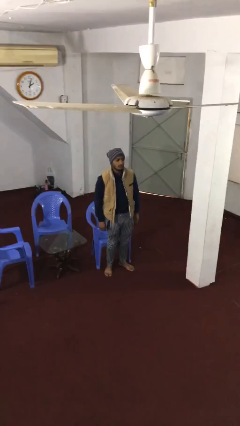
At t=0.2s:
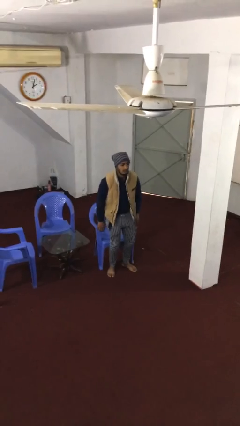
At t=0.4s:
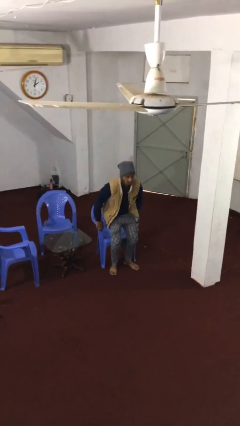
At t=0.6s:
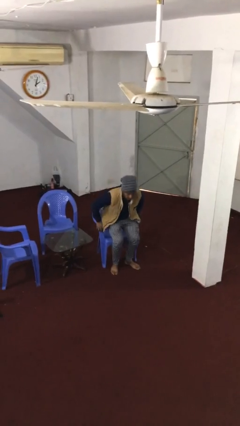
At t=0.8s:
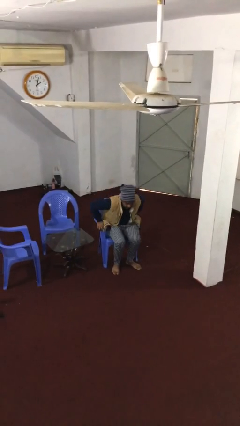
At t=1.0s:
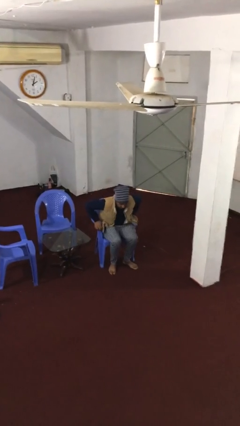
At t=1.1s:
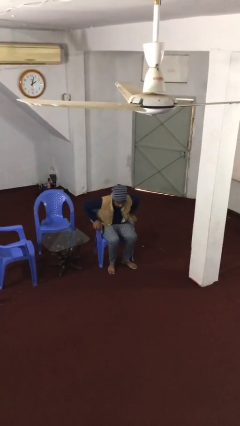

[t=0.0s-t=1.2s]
person sits down

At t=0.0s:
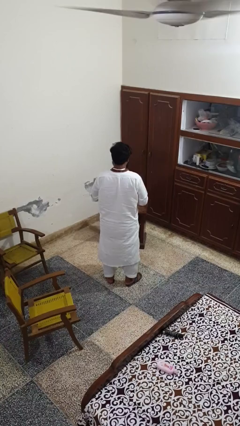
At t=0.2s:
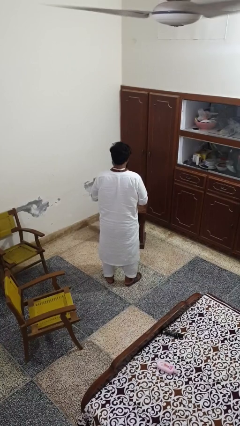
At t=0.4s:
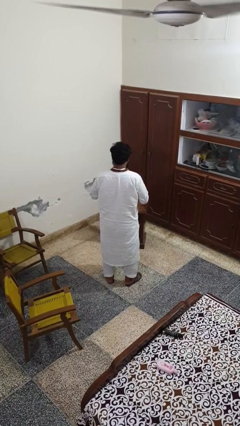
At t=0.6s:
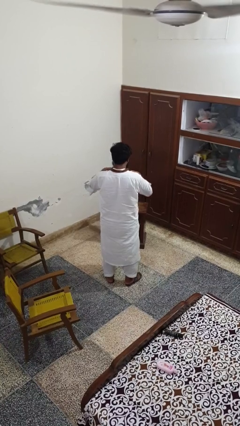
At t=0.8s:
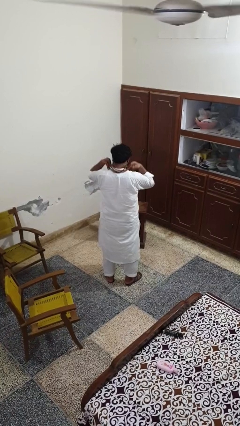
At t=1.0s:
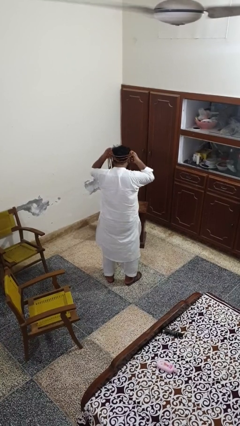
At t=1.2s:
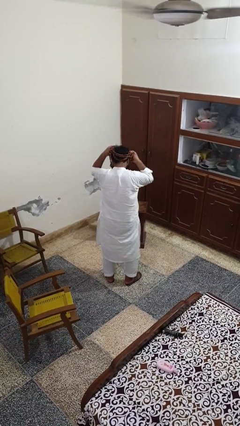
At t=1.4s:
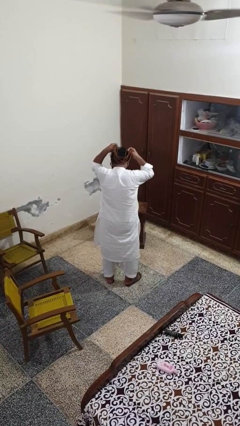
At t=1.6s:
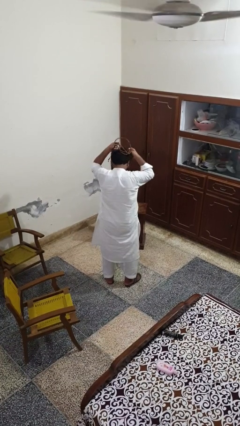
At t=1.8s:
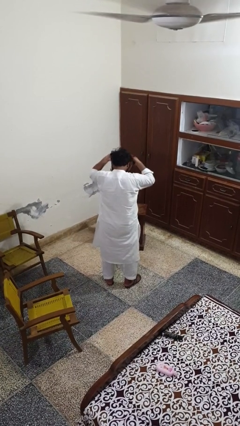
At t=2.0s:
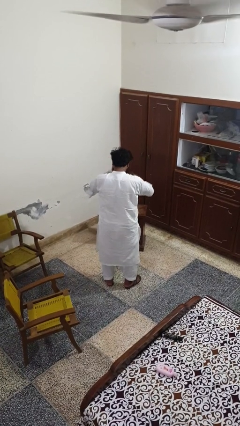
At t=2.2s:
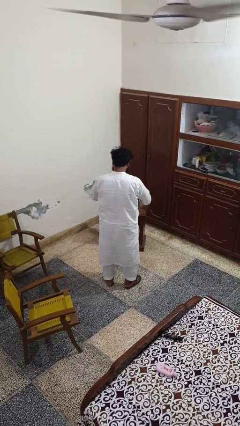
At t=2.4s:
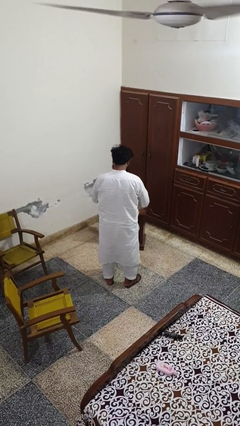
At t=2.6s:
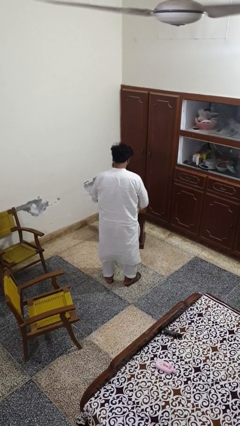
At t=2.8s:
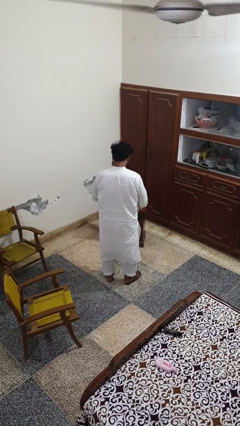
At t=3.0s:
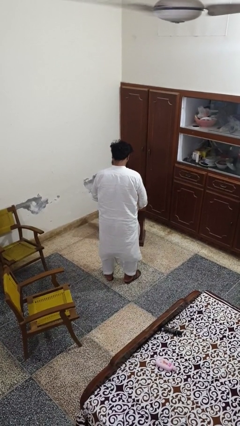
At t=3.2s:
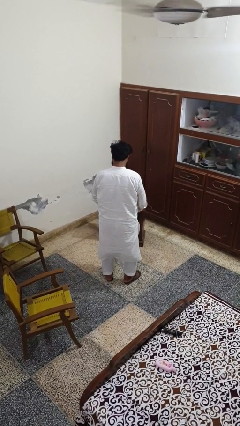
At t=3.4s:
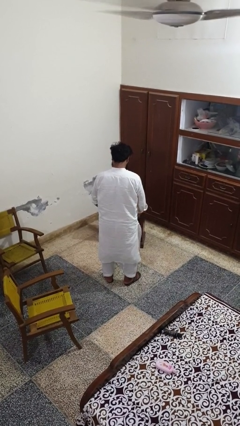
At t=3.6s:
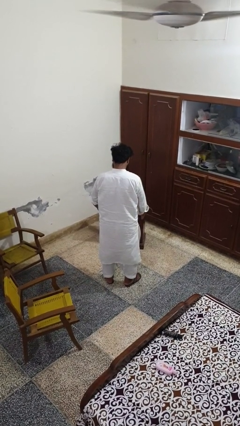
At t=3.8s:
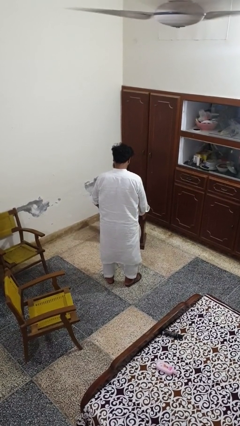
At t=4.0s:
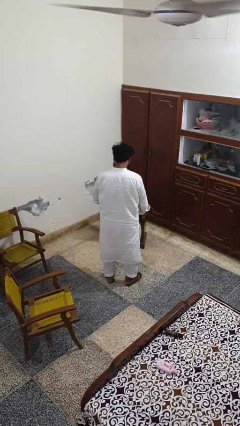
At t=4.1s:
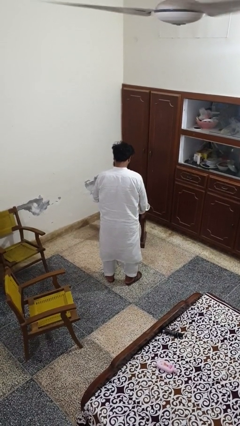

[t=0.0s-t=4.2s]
person takes off necklace

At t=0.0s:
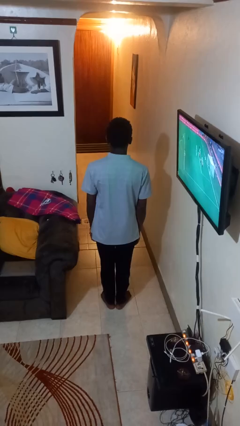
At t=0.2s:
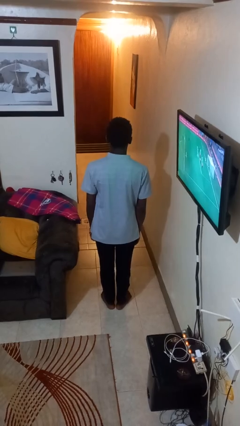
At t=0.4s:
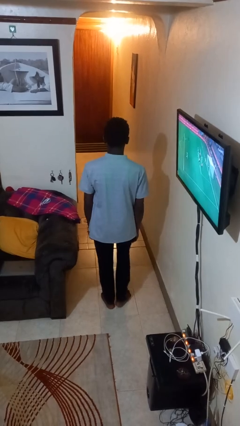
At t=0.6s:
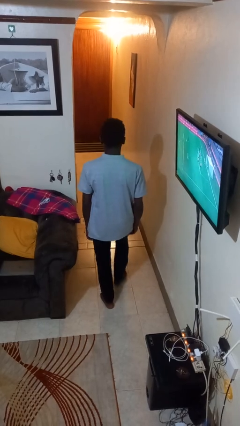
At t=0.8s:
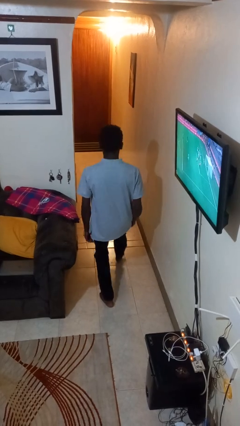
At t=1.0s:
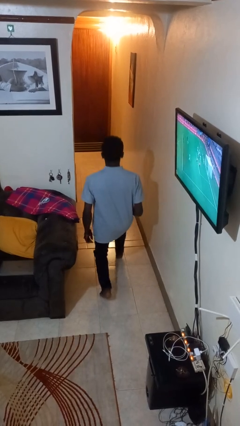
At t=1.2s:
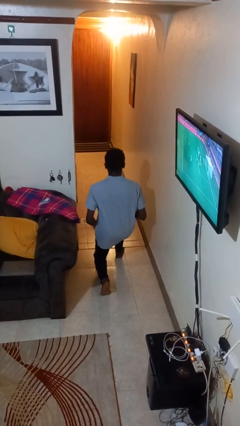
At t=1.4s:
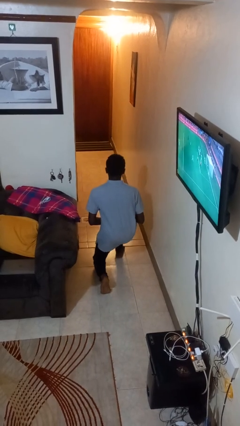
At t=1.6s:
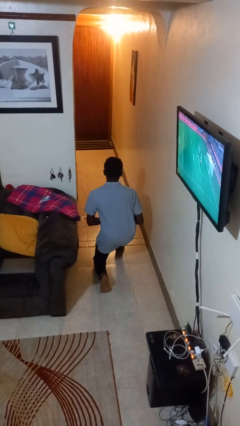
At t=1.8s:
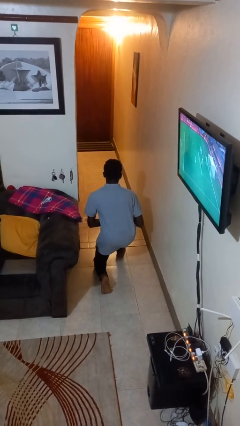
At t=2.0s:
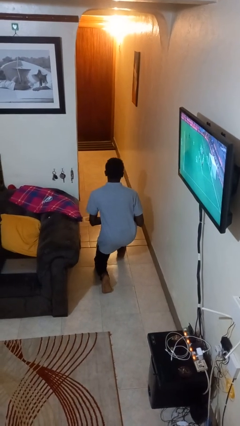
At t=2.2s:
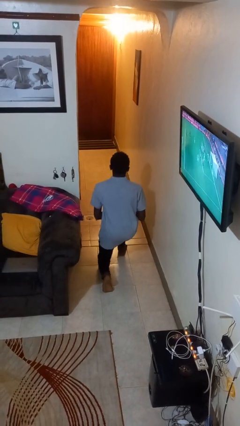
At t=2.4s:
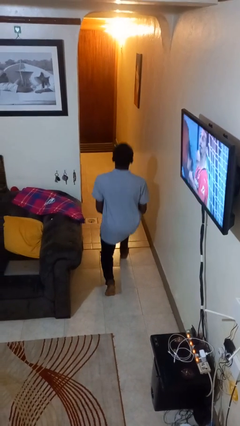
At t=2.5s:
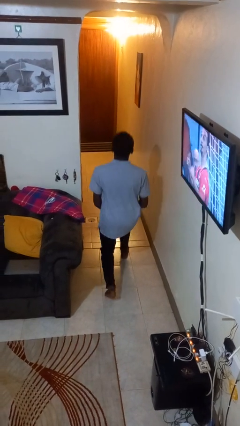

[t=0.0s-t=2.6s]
person exercises with lunges

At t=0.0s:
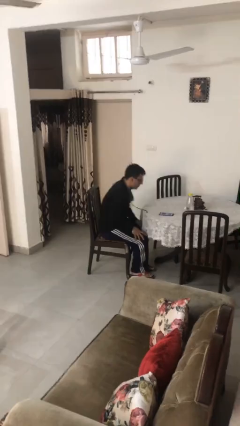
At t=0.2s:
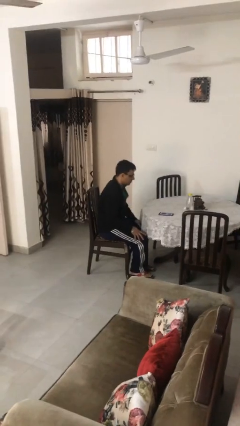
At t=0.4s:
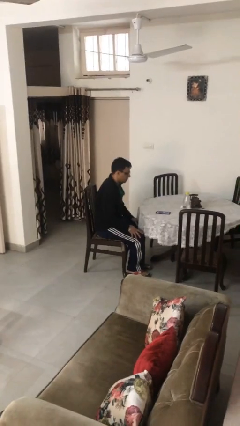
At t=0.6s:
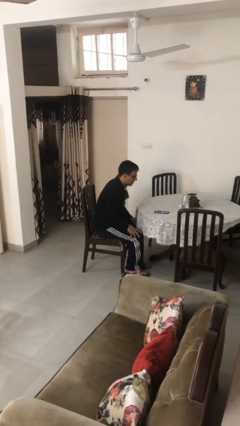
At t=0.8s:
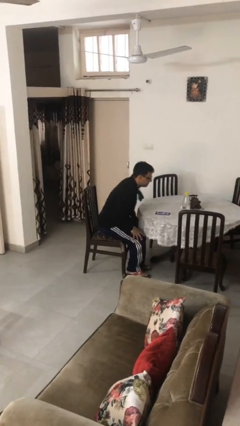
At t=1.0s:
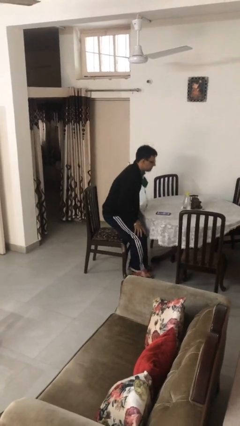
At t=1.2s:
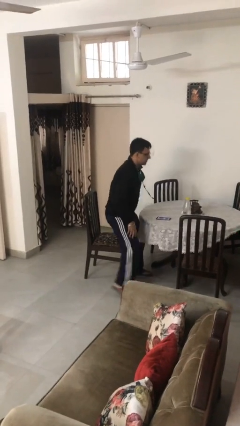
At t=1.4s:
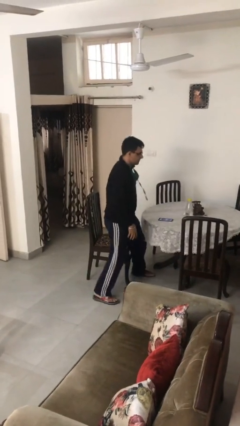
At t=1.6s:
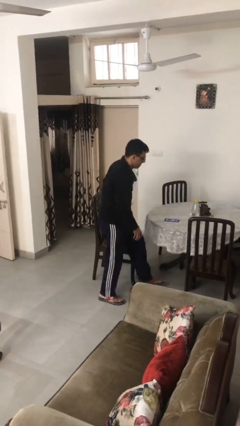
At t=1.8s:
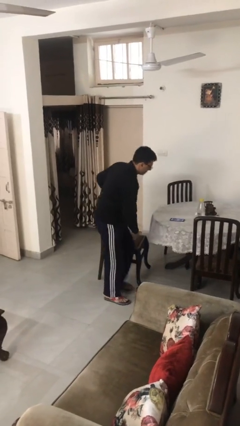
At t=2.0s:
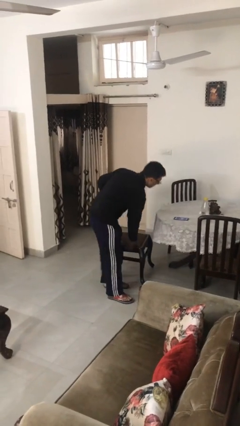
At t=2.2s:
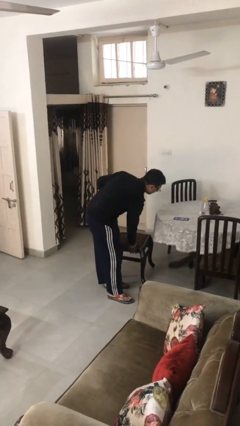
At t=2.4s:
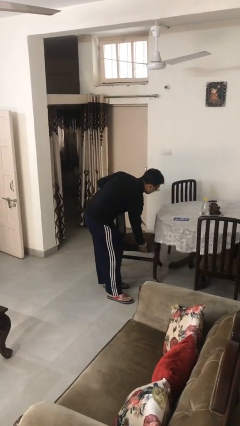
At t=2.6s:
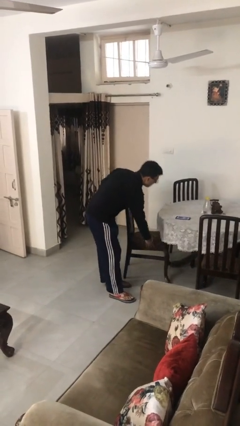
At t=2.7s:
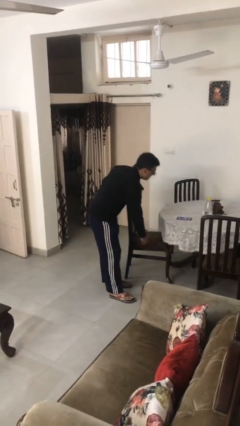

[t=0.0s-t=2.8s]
person stands up

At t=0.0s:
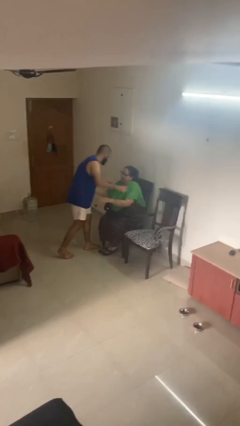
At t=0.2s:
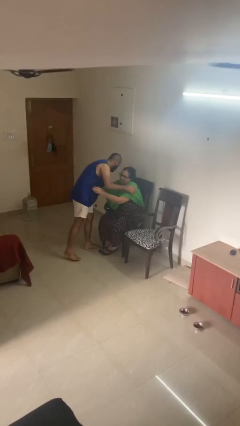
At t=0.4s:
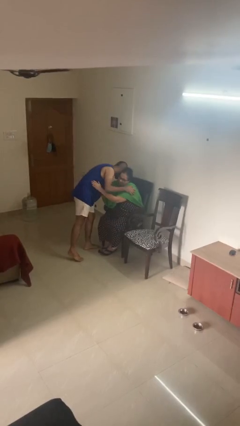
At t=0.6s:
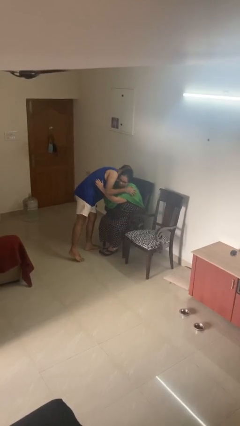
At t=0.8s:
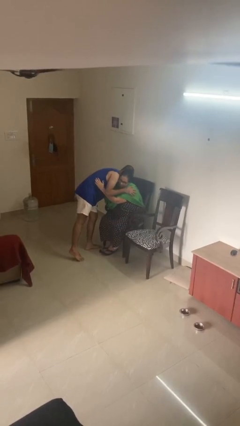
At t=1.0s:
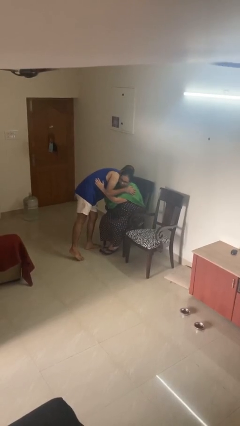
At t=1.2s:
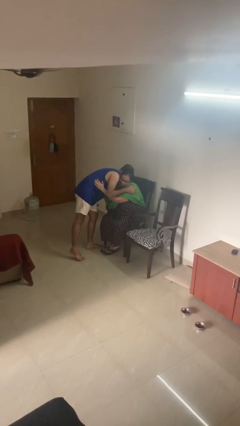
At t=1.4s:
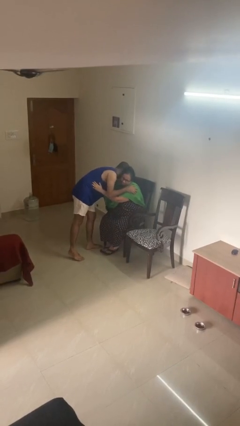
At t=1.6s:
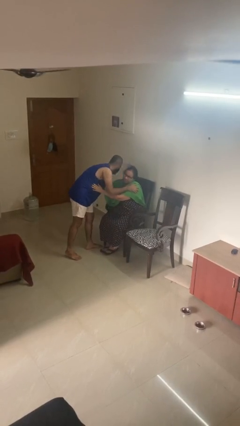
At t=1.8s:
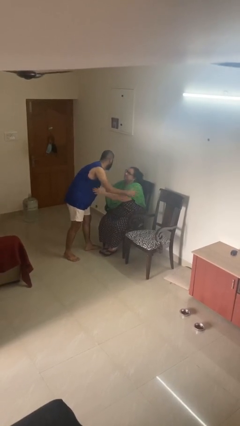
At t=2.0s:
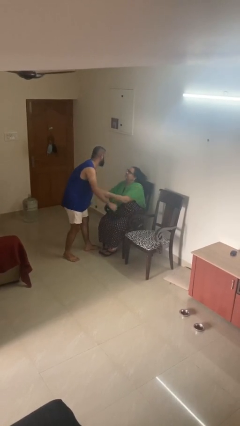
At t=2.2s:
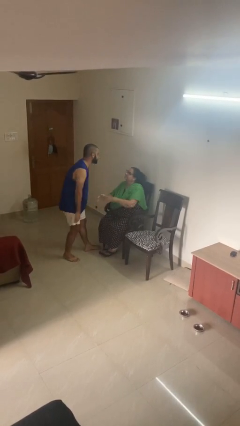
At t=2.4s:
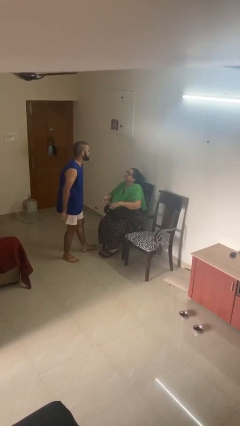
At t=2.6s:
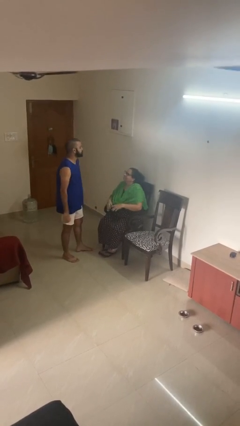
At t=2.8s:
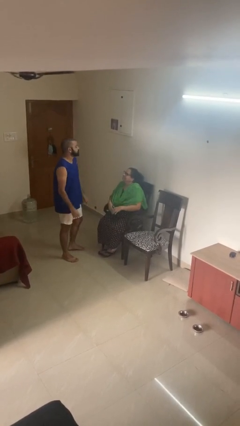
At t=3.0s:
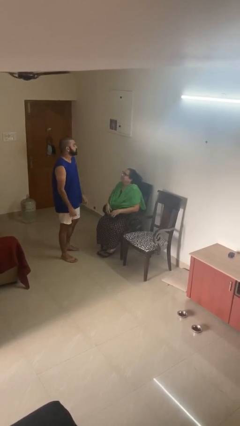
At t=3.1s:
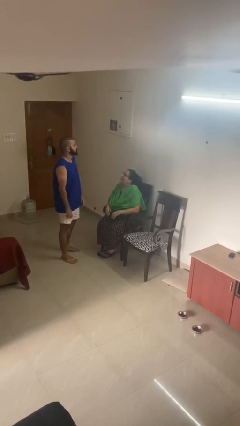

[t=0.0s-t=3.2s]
person embraces person

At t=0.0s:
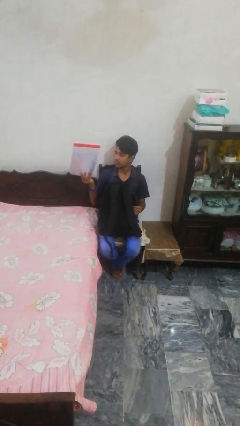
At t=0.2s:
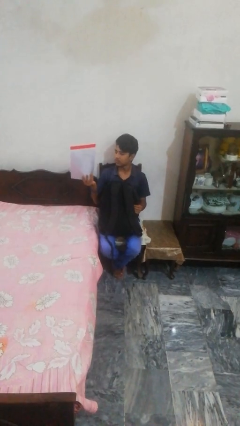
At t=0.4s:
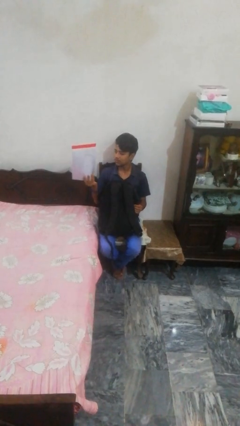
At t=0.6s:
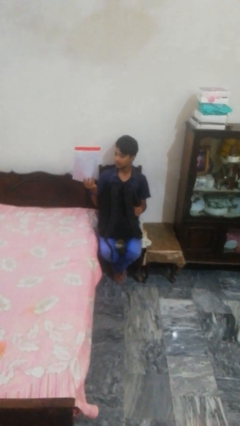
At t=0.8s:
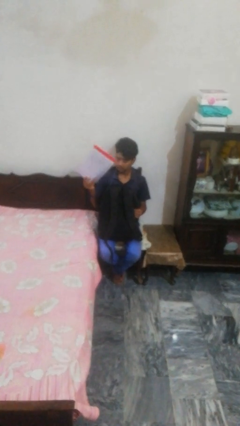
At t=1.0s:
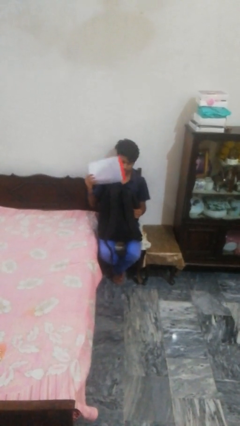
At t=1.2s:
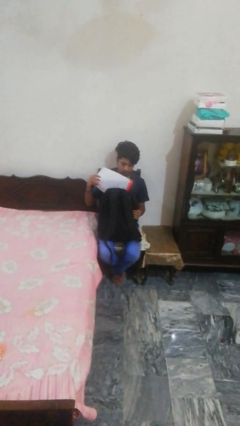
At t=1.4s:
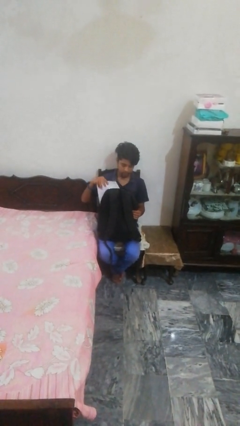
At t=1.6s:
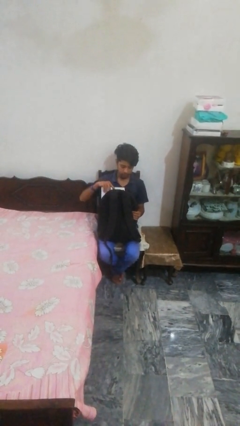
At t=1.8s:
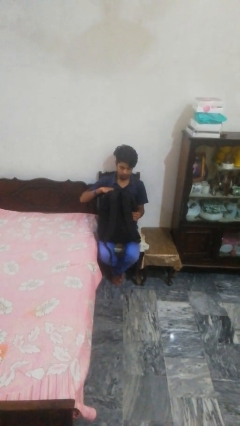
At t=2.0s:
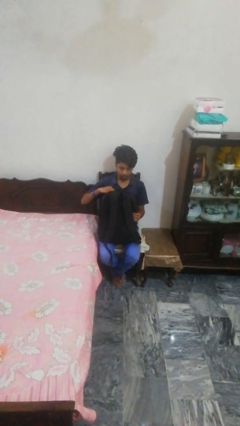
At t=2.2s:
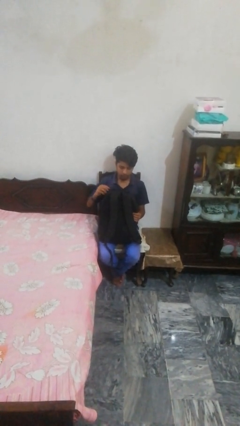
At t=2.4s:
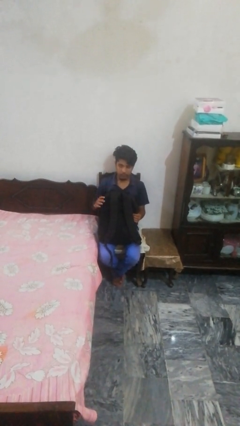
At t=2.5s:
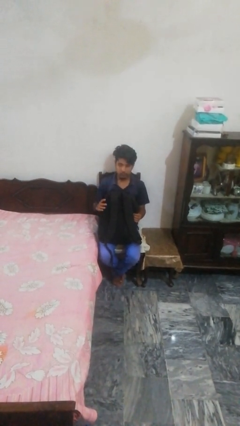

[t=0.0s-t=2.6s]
person puts object into backpack

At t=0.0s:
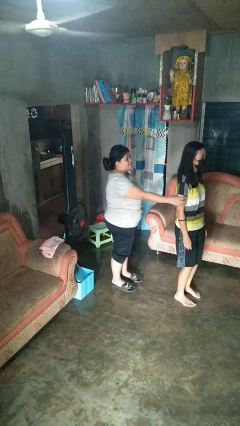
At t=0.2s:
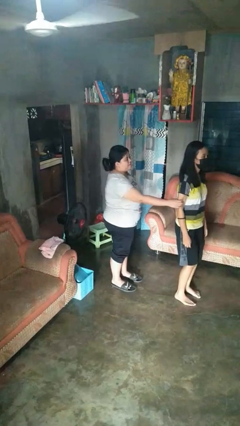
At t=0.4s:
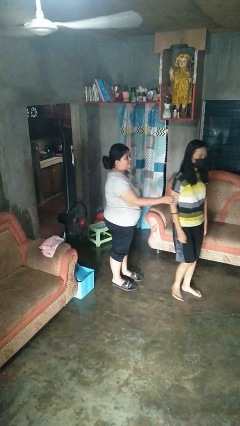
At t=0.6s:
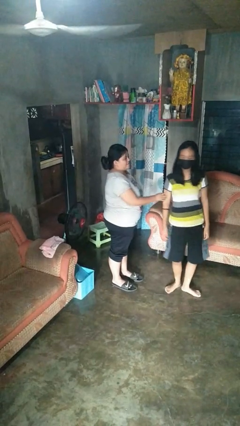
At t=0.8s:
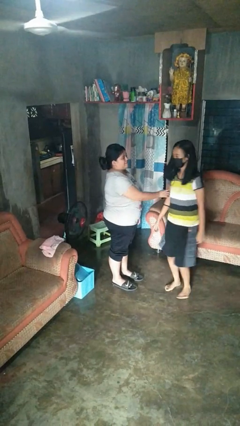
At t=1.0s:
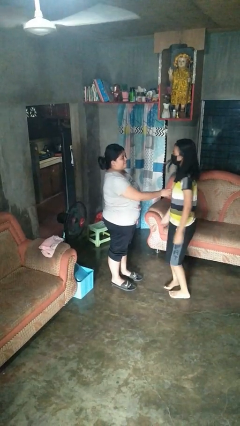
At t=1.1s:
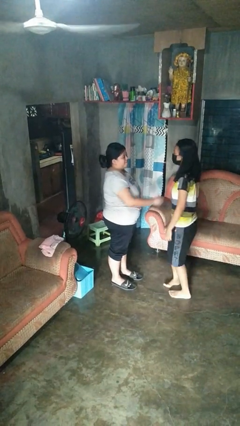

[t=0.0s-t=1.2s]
person spins person around
